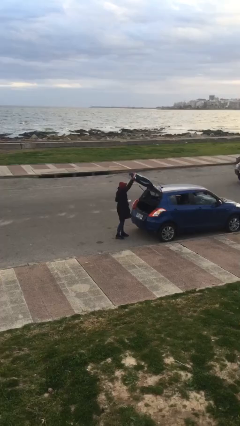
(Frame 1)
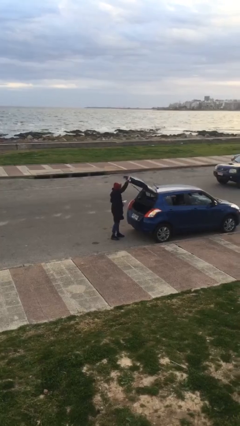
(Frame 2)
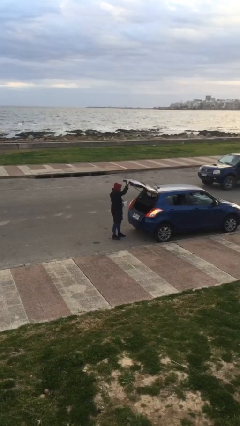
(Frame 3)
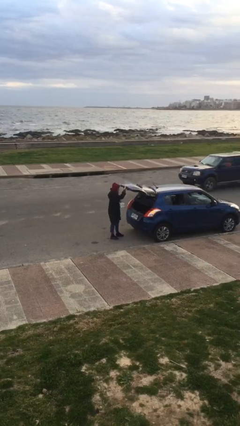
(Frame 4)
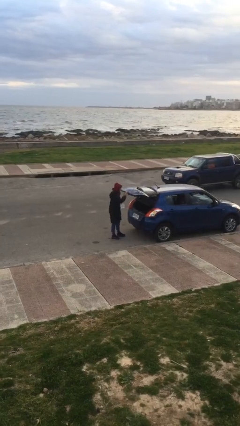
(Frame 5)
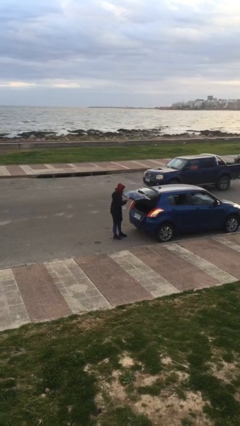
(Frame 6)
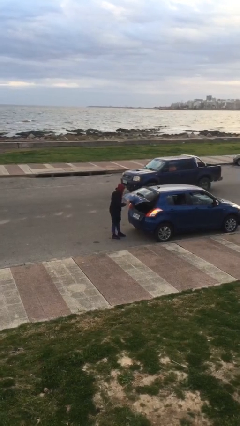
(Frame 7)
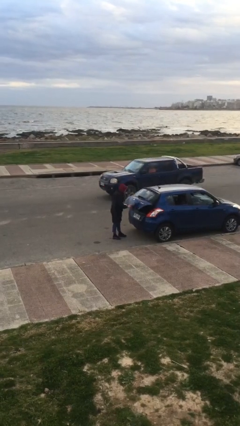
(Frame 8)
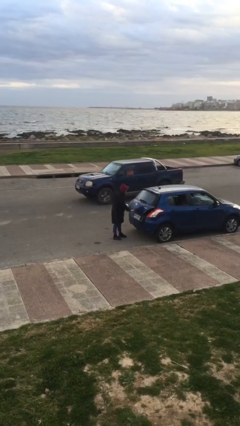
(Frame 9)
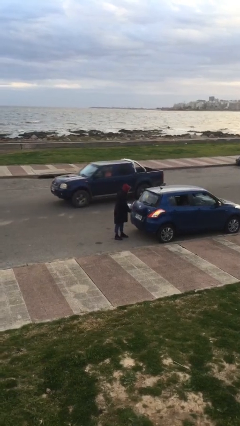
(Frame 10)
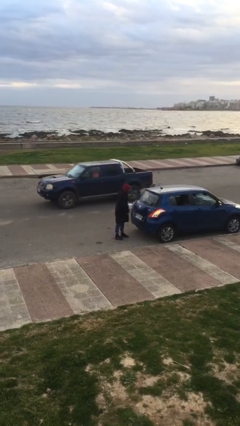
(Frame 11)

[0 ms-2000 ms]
person closes car door

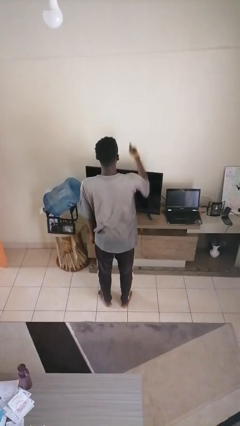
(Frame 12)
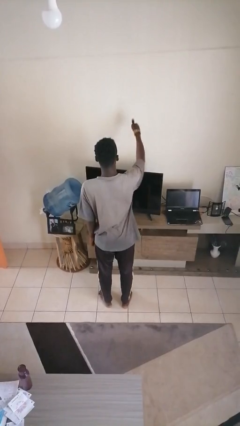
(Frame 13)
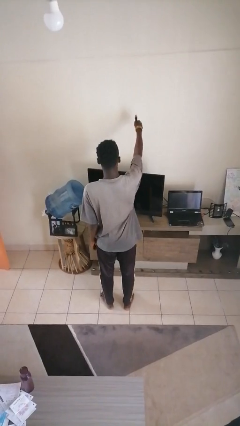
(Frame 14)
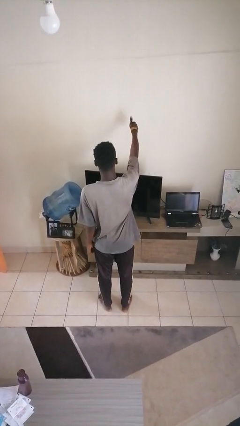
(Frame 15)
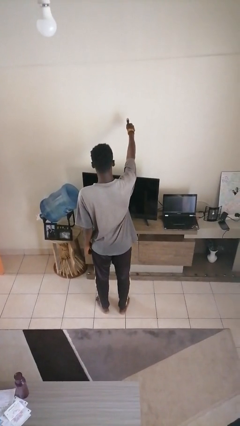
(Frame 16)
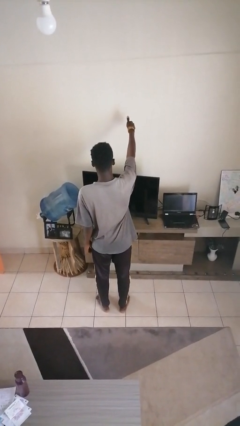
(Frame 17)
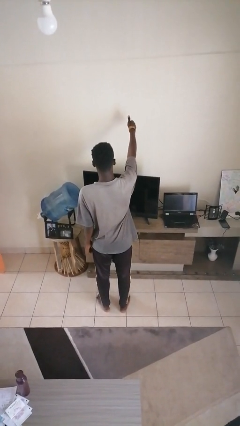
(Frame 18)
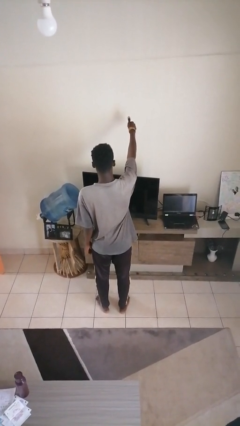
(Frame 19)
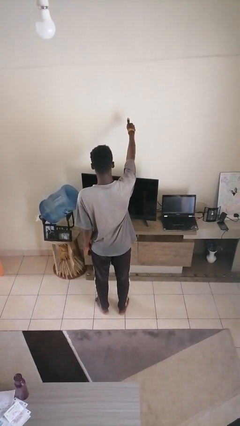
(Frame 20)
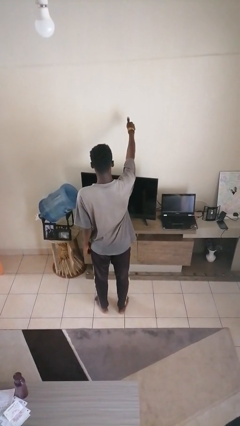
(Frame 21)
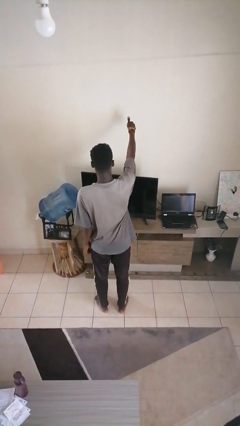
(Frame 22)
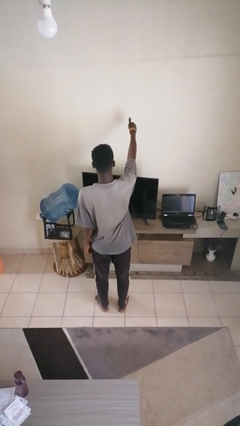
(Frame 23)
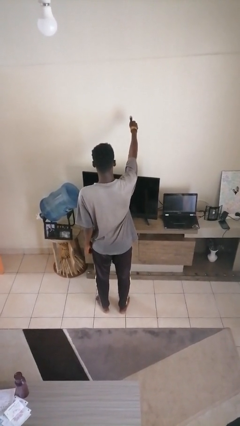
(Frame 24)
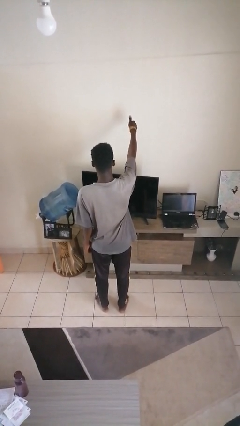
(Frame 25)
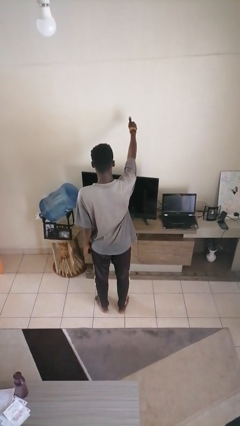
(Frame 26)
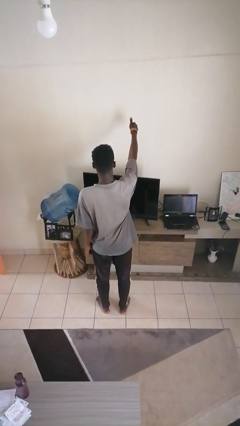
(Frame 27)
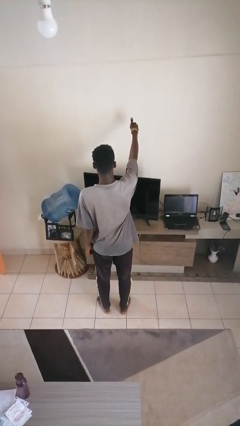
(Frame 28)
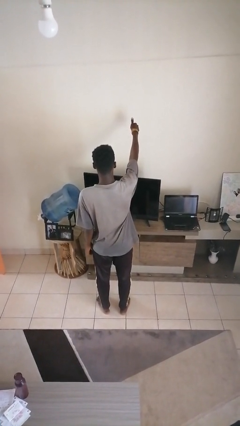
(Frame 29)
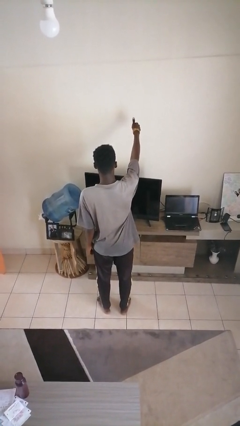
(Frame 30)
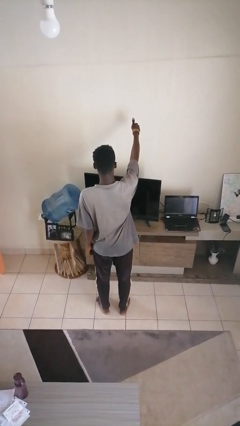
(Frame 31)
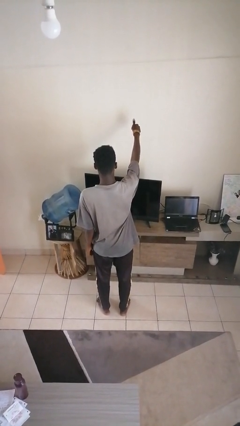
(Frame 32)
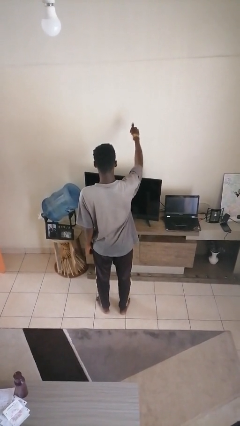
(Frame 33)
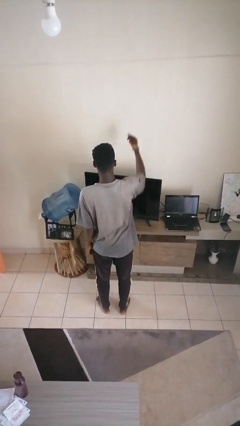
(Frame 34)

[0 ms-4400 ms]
person gestures thumbs up

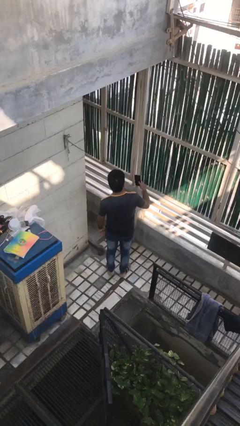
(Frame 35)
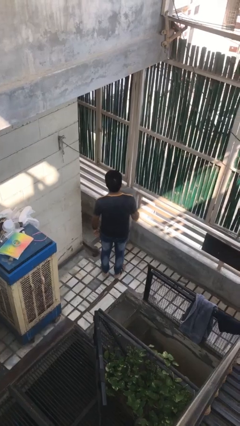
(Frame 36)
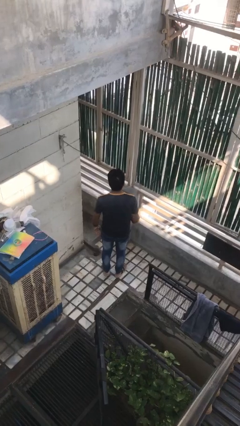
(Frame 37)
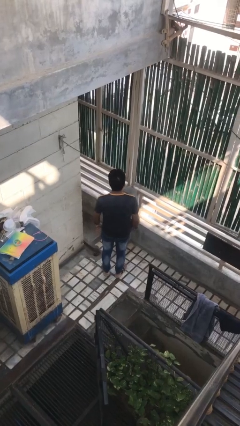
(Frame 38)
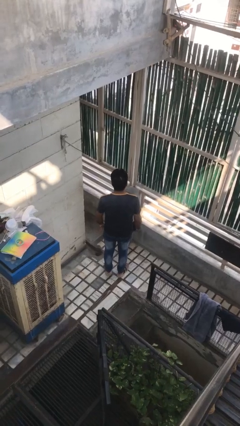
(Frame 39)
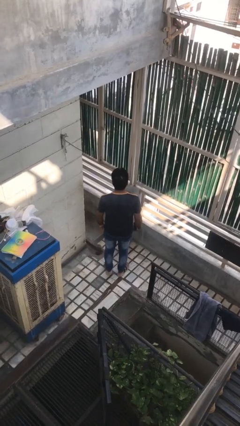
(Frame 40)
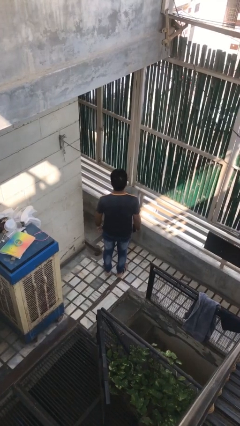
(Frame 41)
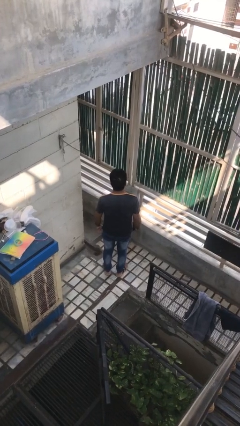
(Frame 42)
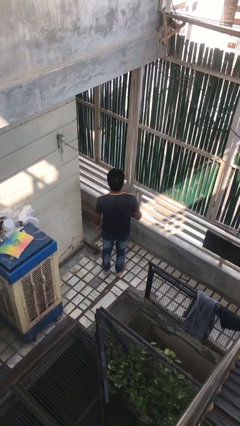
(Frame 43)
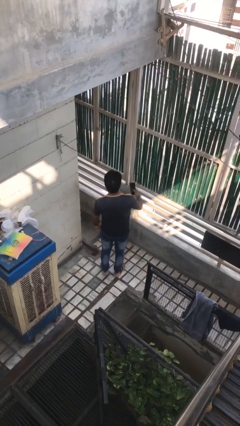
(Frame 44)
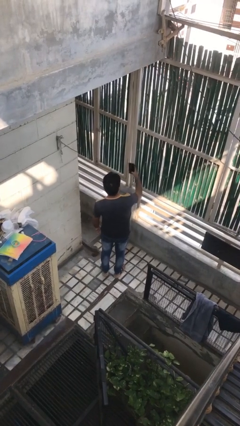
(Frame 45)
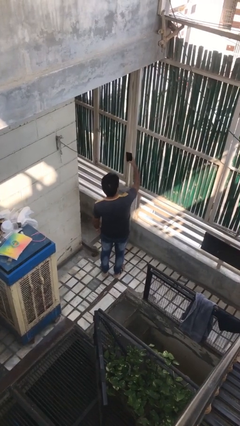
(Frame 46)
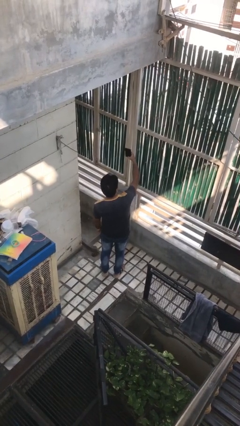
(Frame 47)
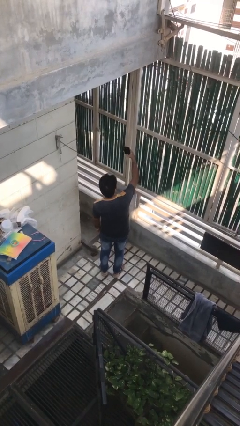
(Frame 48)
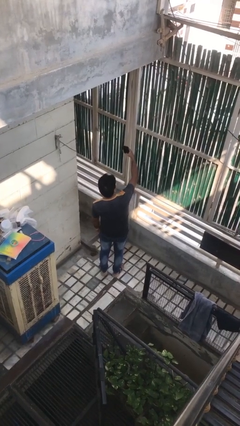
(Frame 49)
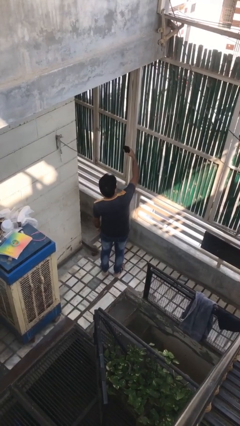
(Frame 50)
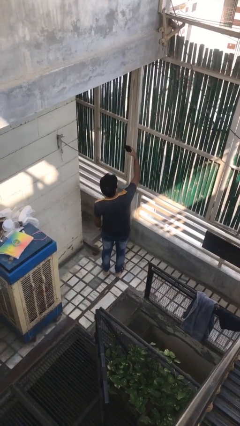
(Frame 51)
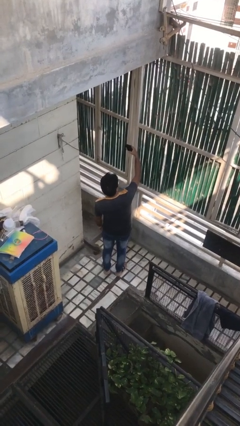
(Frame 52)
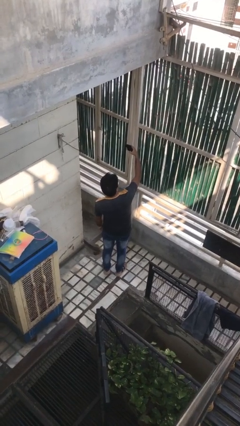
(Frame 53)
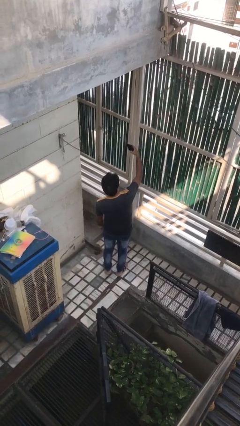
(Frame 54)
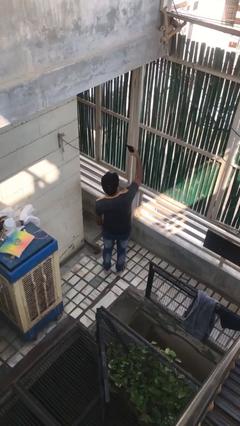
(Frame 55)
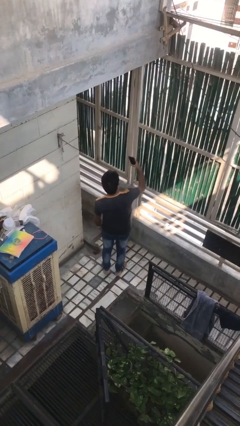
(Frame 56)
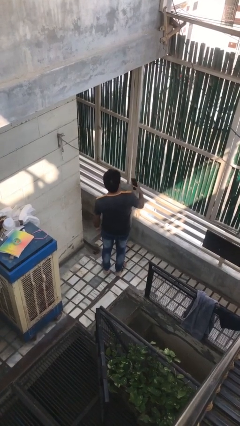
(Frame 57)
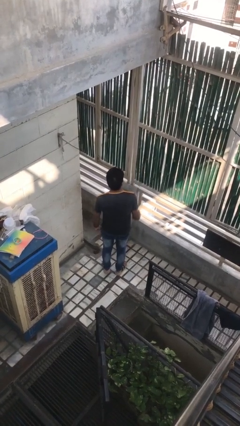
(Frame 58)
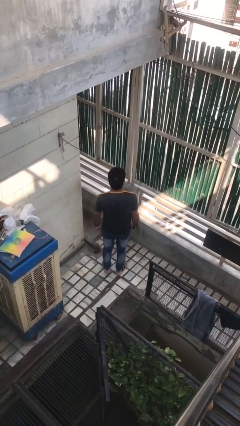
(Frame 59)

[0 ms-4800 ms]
person takes selfie

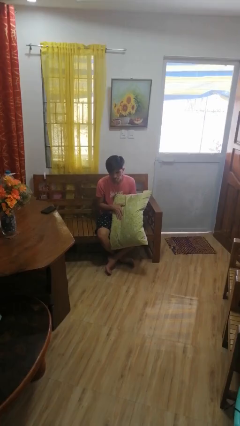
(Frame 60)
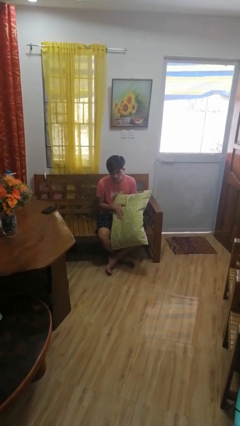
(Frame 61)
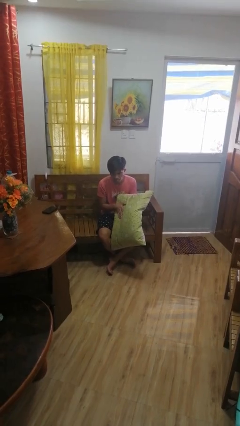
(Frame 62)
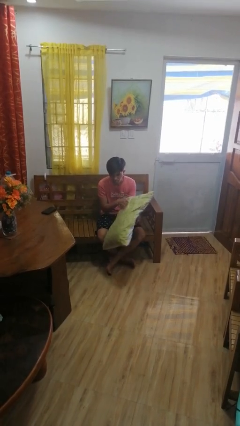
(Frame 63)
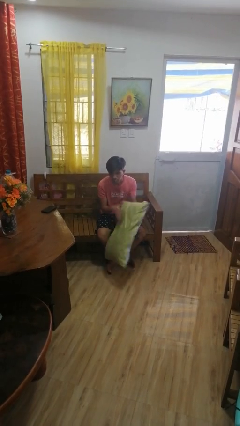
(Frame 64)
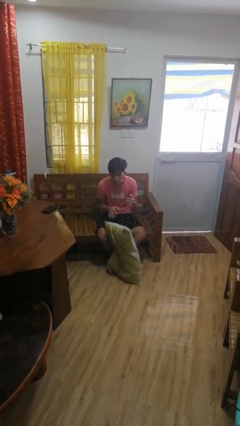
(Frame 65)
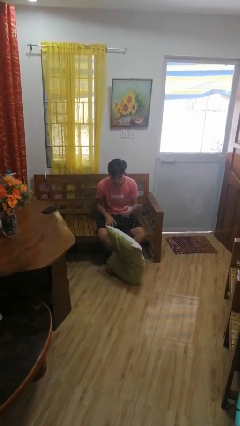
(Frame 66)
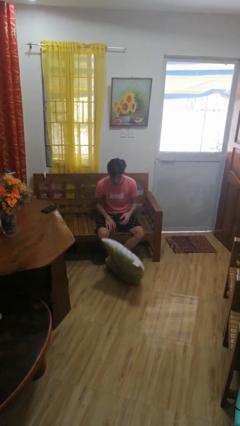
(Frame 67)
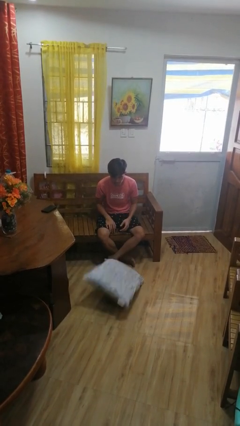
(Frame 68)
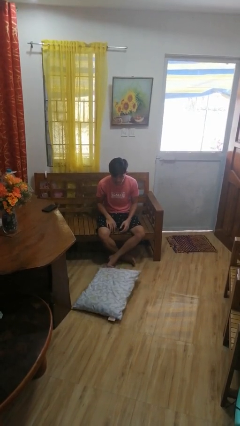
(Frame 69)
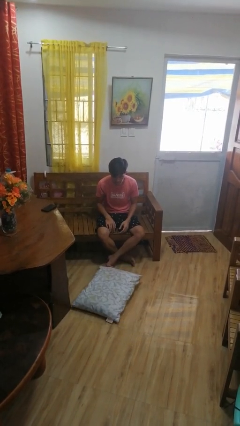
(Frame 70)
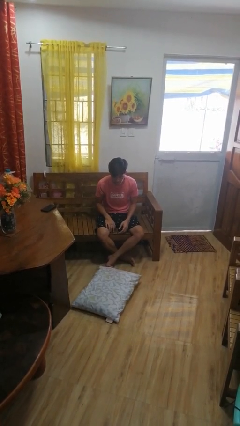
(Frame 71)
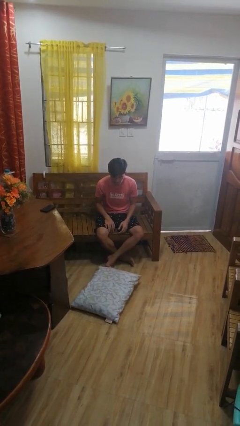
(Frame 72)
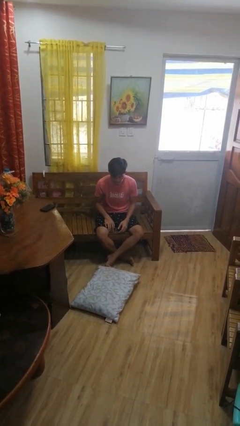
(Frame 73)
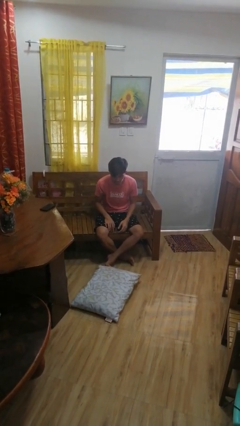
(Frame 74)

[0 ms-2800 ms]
person drops object

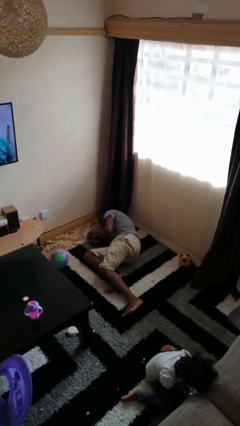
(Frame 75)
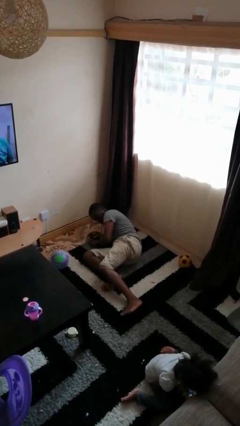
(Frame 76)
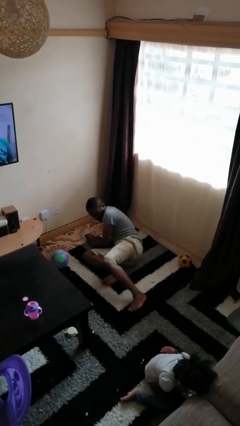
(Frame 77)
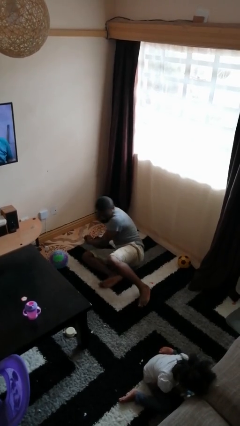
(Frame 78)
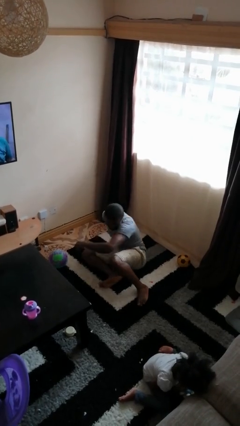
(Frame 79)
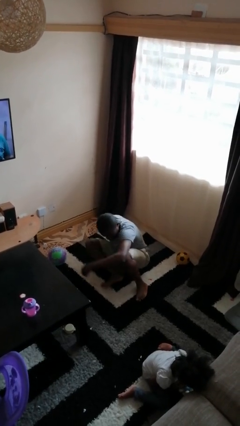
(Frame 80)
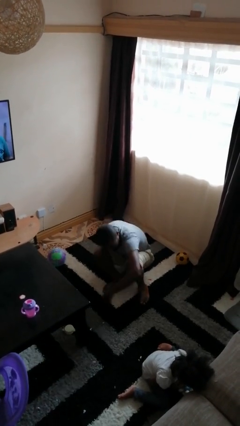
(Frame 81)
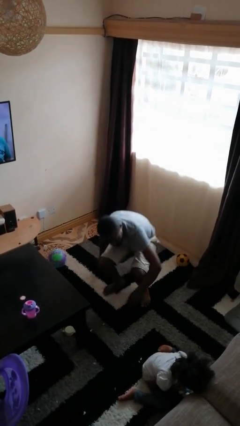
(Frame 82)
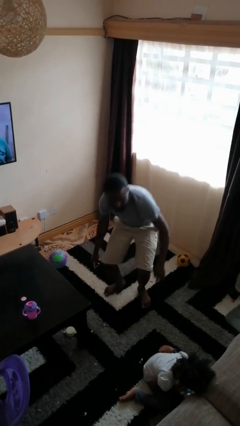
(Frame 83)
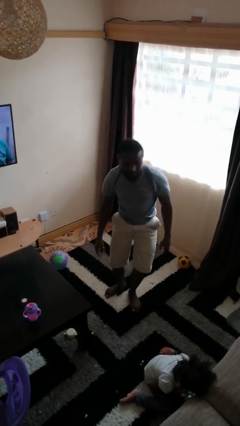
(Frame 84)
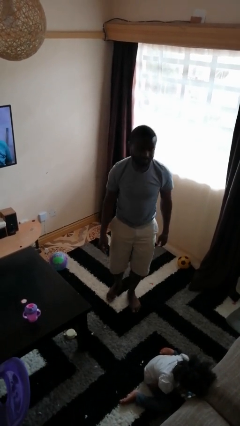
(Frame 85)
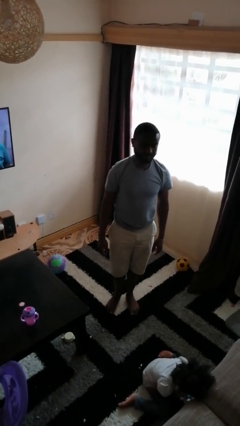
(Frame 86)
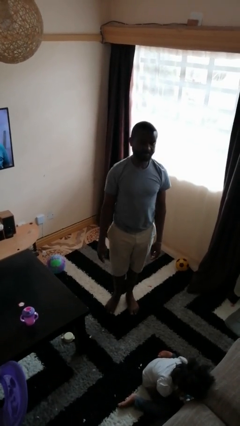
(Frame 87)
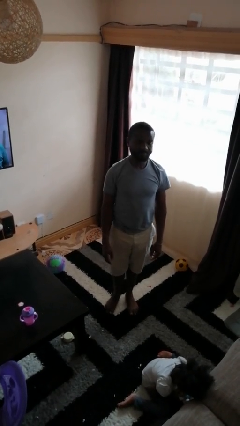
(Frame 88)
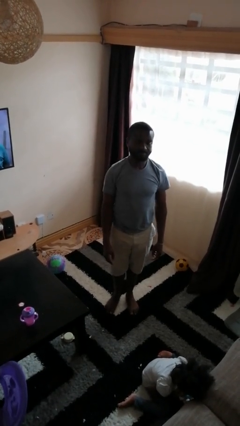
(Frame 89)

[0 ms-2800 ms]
person stands up from floor
